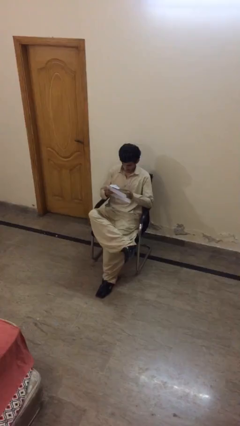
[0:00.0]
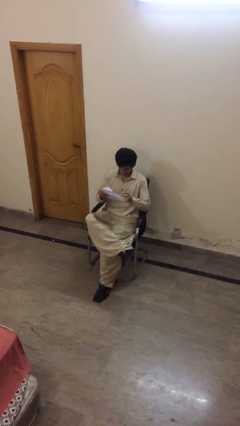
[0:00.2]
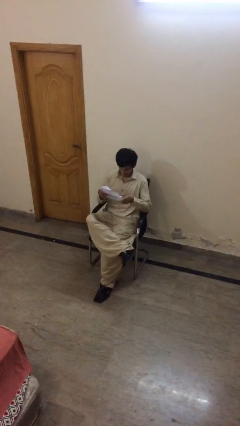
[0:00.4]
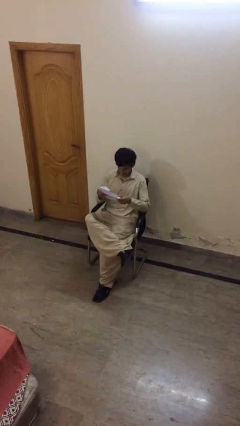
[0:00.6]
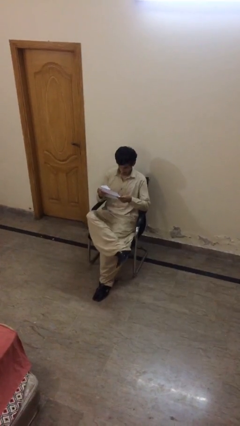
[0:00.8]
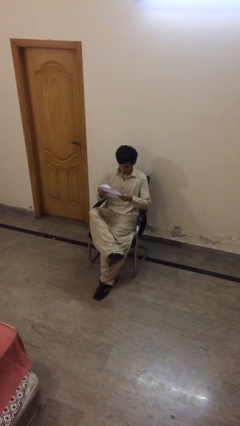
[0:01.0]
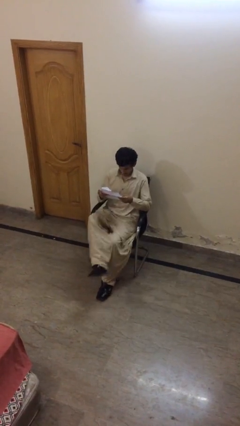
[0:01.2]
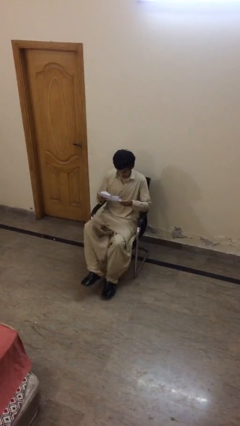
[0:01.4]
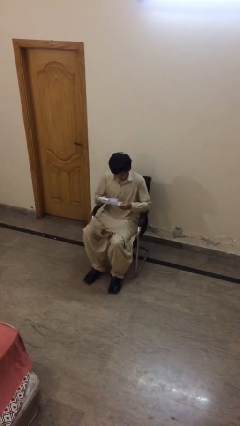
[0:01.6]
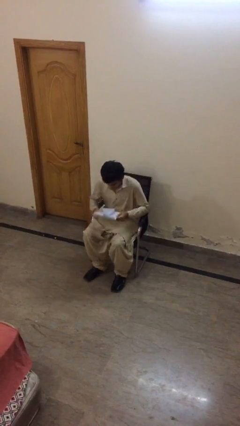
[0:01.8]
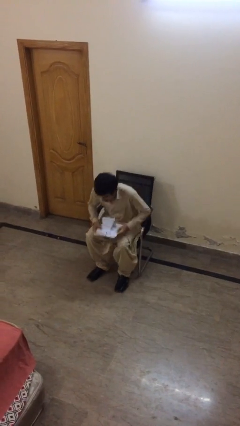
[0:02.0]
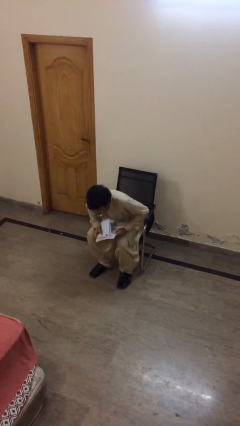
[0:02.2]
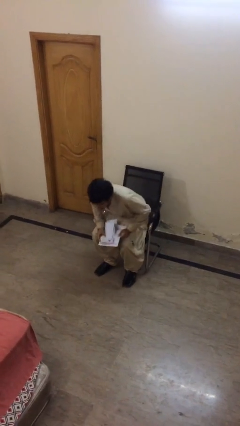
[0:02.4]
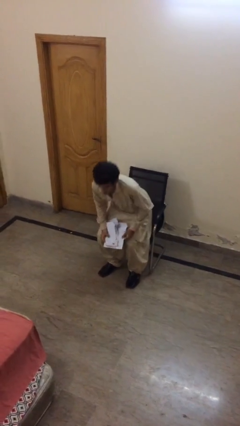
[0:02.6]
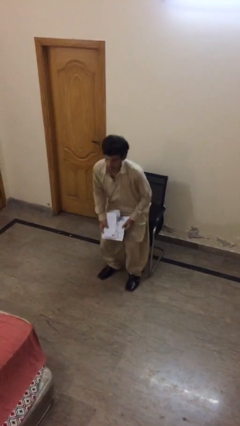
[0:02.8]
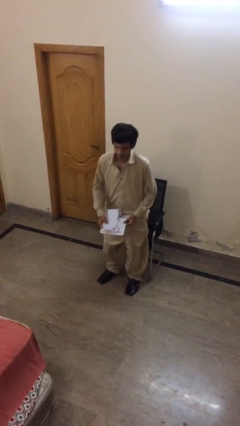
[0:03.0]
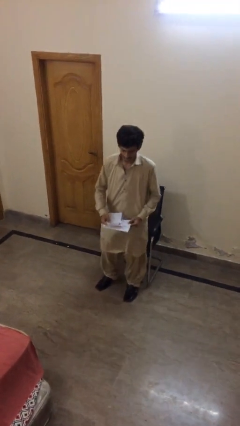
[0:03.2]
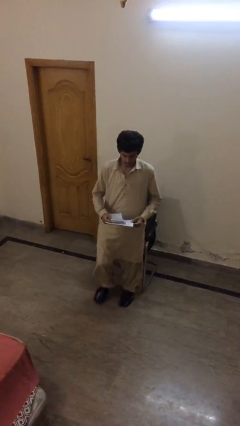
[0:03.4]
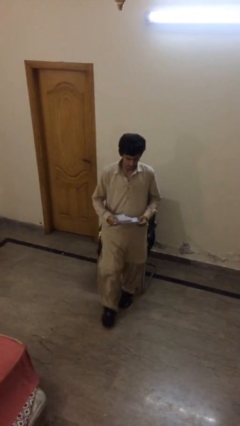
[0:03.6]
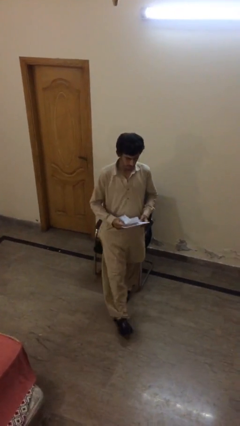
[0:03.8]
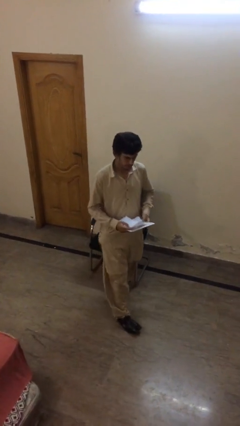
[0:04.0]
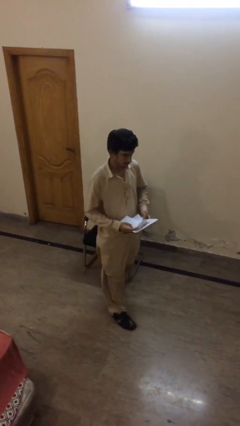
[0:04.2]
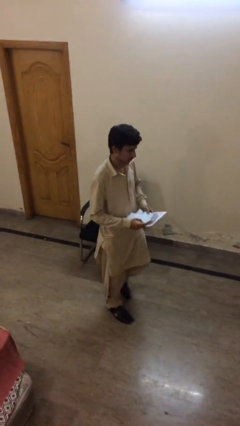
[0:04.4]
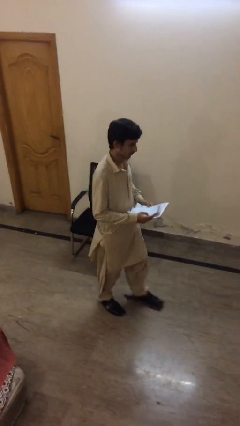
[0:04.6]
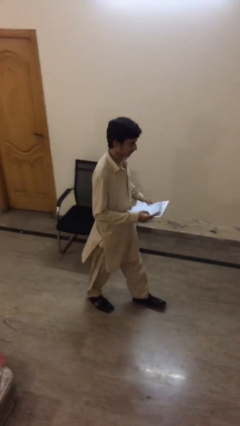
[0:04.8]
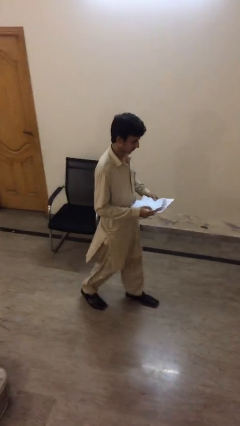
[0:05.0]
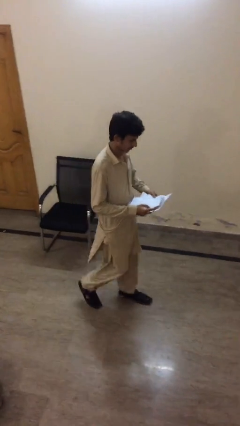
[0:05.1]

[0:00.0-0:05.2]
person stands up

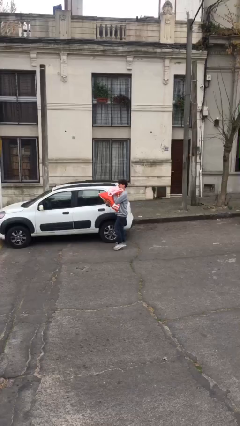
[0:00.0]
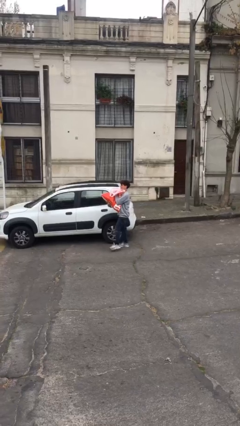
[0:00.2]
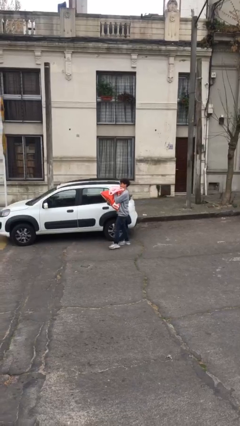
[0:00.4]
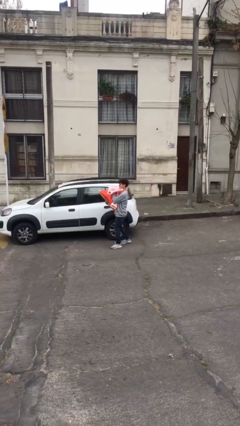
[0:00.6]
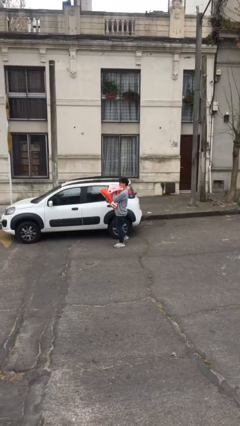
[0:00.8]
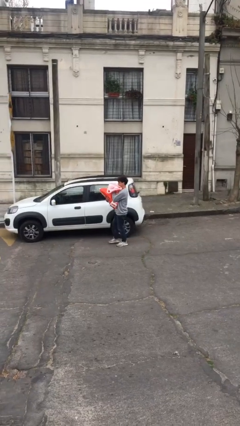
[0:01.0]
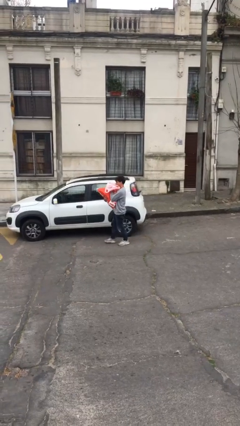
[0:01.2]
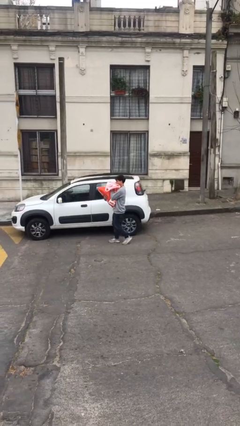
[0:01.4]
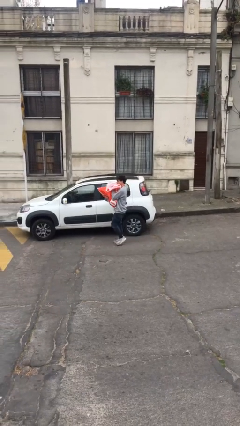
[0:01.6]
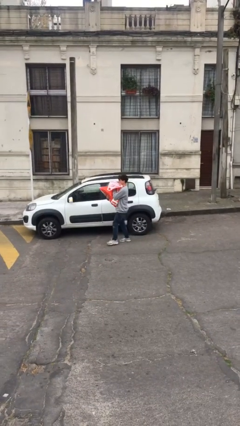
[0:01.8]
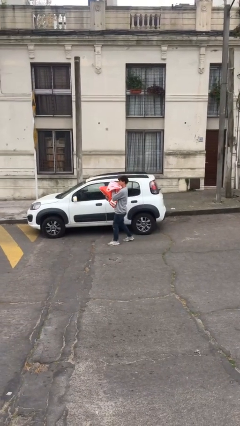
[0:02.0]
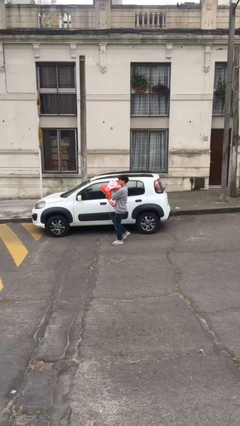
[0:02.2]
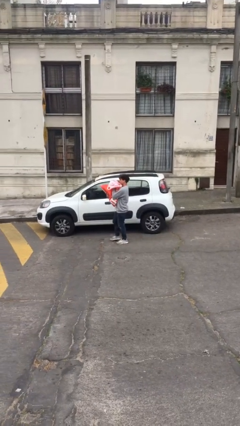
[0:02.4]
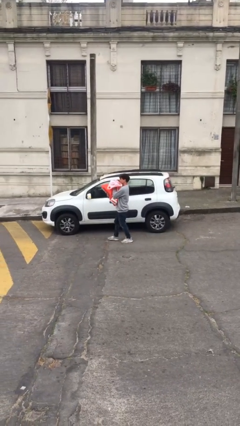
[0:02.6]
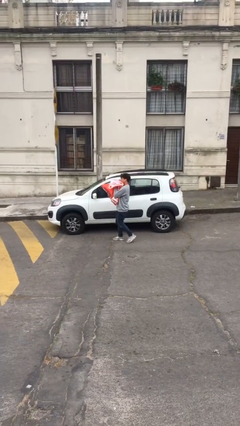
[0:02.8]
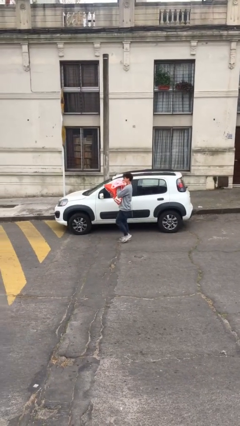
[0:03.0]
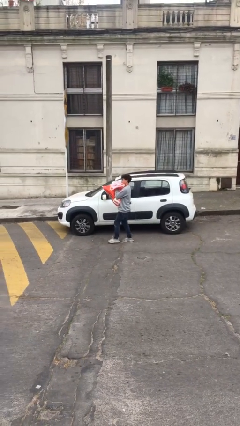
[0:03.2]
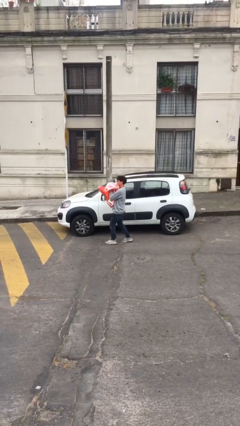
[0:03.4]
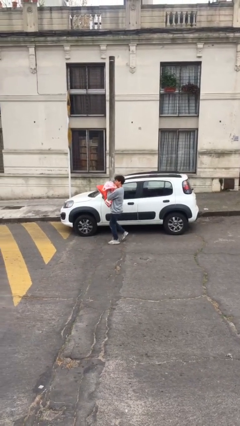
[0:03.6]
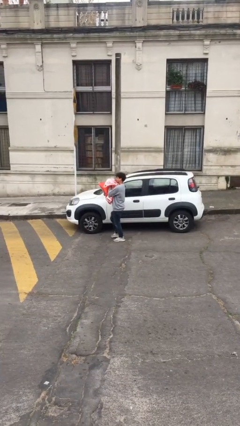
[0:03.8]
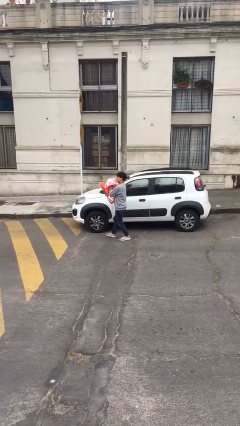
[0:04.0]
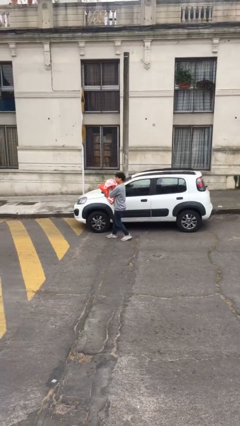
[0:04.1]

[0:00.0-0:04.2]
person carries heavy object

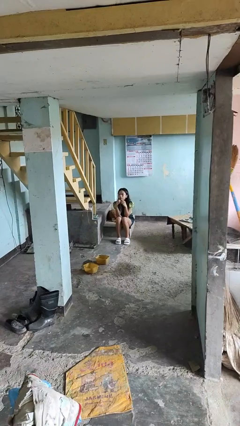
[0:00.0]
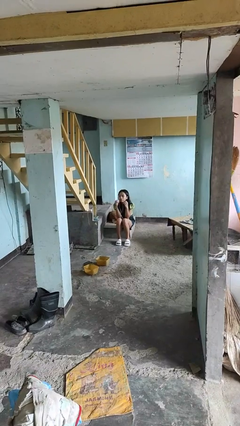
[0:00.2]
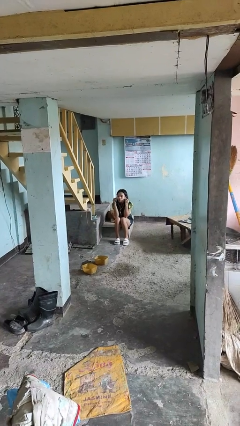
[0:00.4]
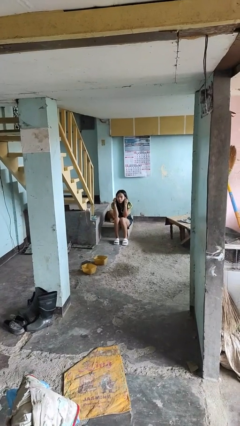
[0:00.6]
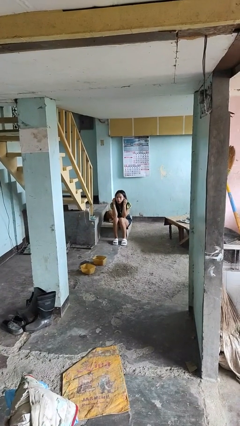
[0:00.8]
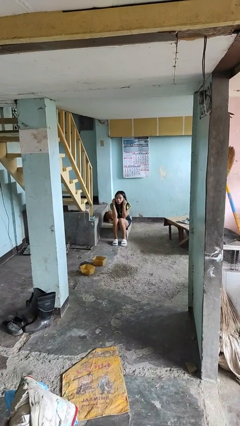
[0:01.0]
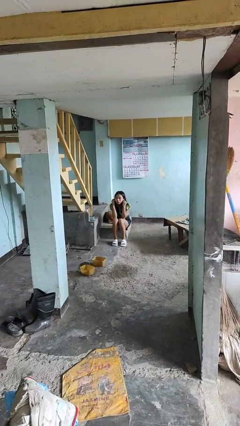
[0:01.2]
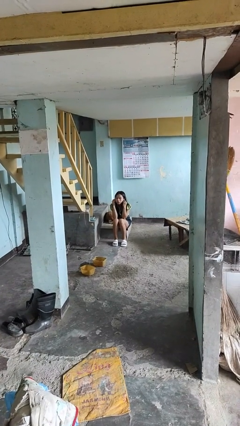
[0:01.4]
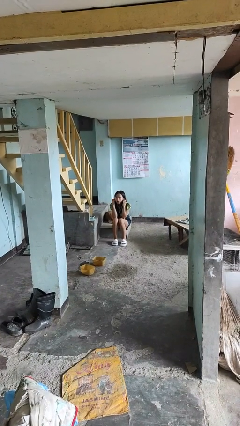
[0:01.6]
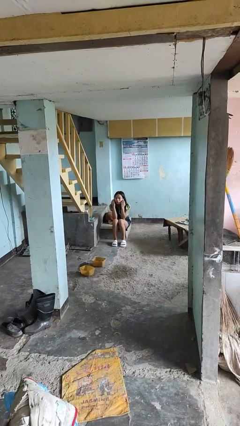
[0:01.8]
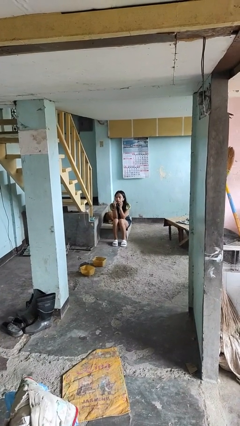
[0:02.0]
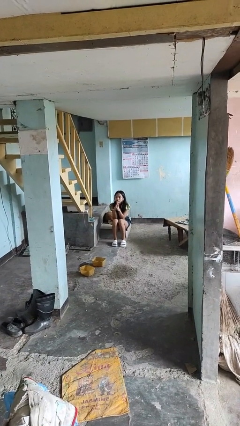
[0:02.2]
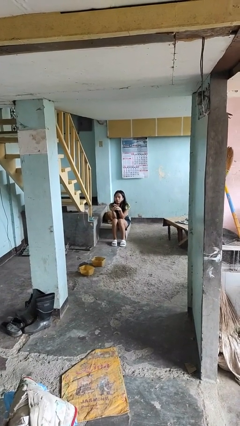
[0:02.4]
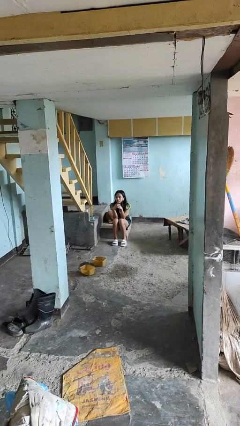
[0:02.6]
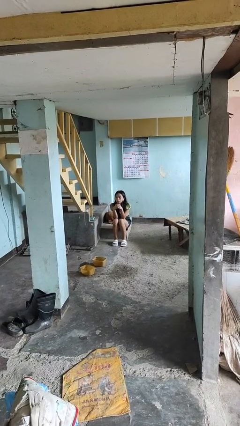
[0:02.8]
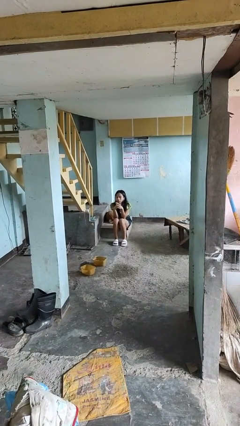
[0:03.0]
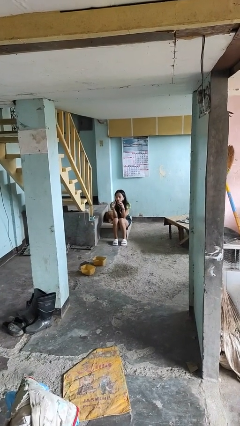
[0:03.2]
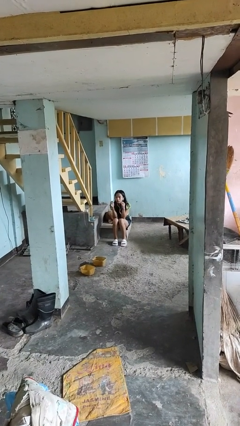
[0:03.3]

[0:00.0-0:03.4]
person puts on headphones

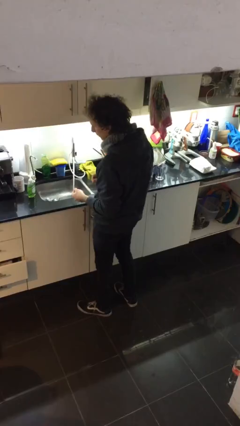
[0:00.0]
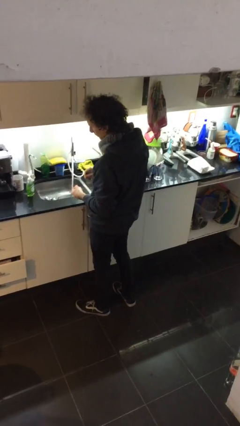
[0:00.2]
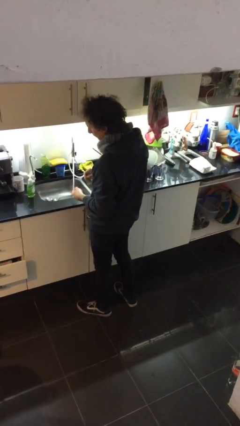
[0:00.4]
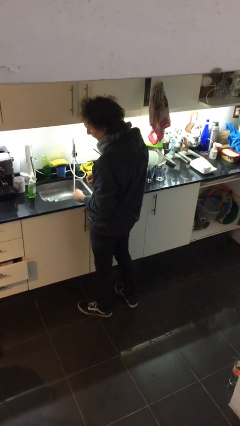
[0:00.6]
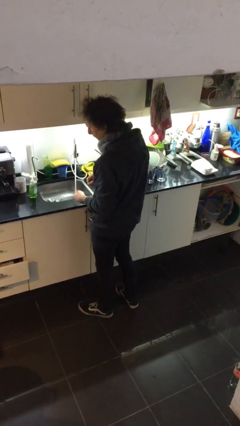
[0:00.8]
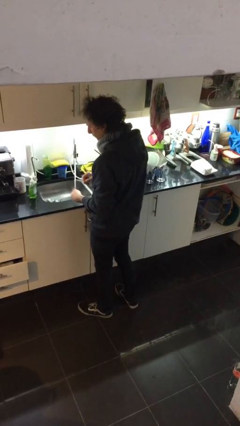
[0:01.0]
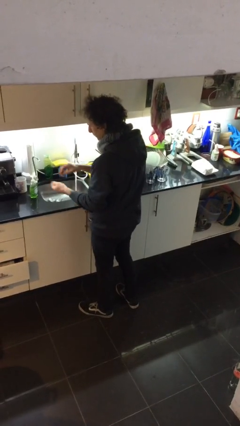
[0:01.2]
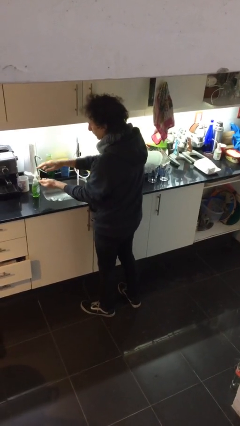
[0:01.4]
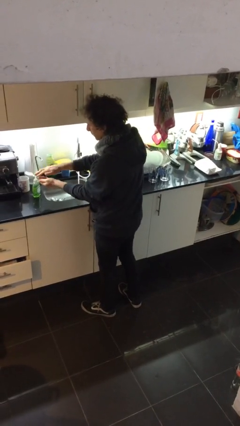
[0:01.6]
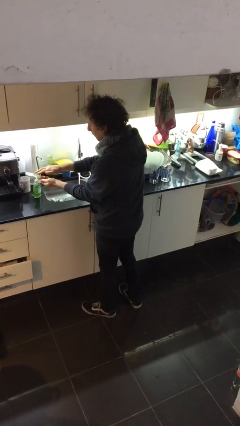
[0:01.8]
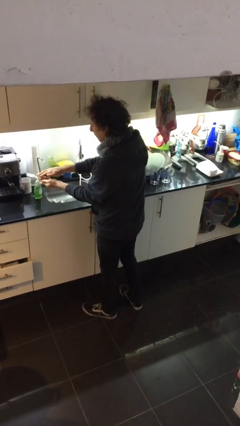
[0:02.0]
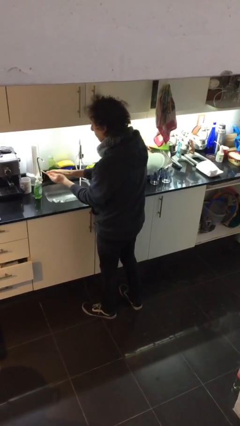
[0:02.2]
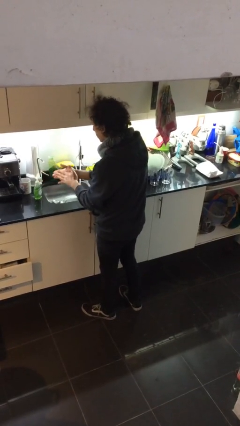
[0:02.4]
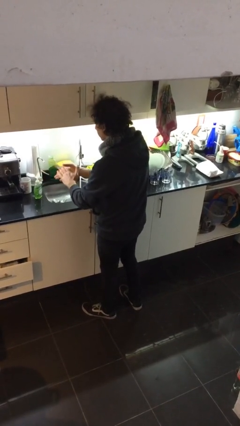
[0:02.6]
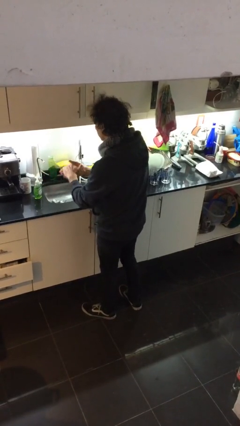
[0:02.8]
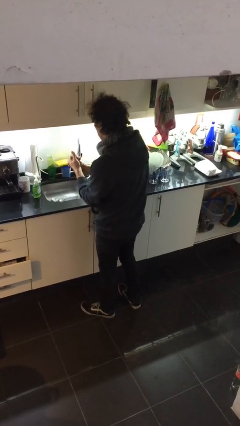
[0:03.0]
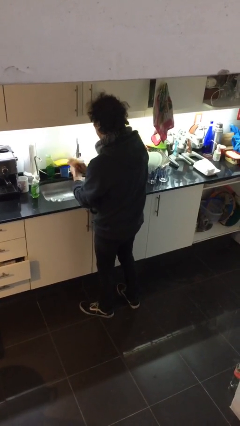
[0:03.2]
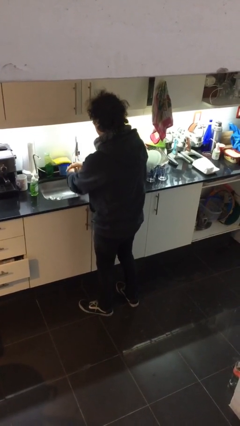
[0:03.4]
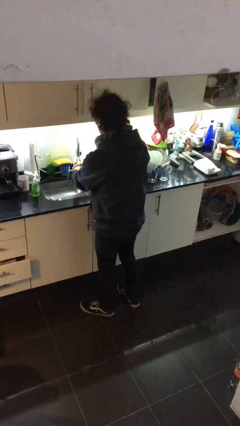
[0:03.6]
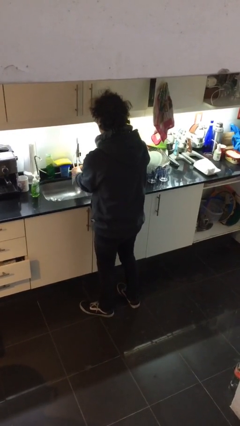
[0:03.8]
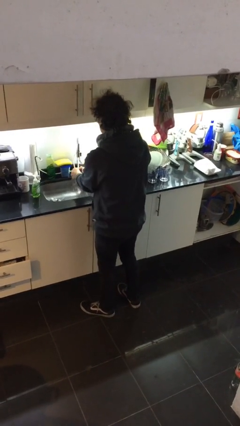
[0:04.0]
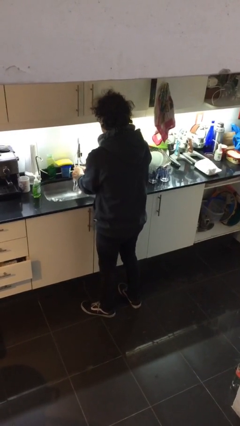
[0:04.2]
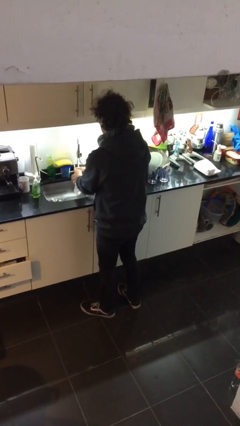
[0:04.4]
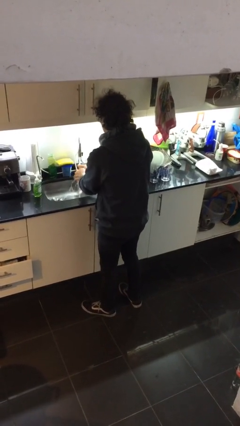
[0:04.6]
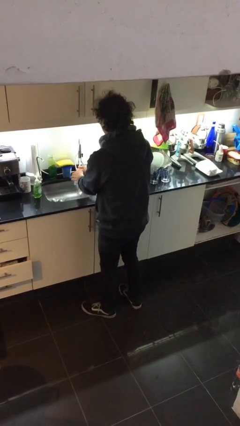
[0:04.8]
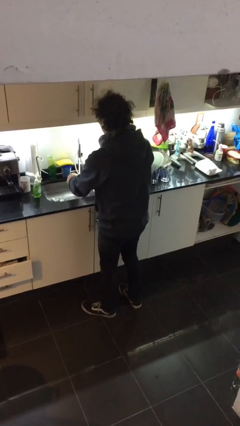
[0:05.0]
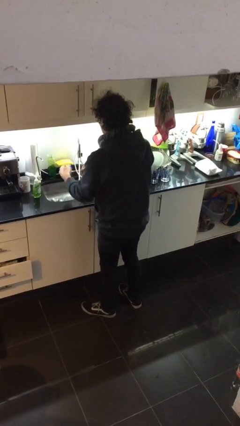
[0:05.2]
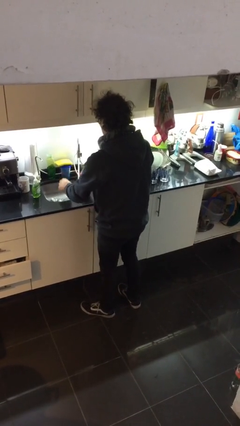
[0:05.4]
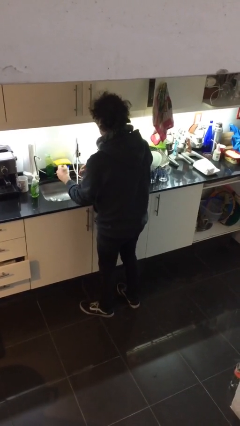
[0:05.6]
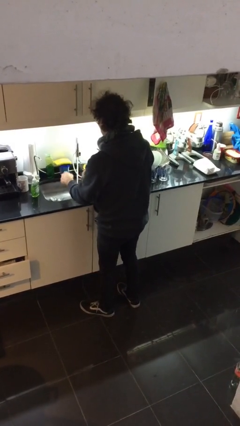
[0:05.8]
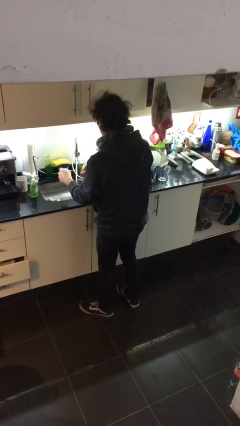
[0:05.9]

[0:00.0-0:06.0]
person washes hands
